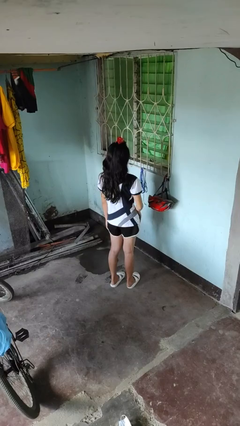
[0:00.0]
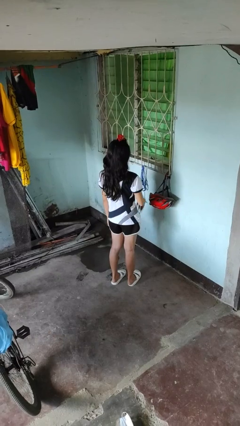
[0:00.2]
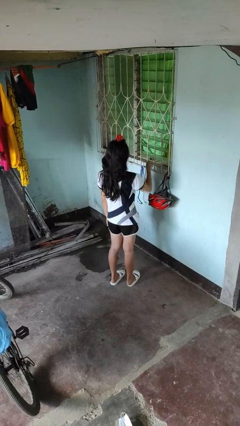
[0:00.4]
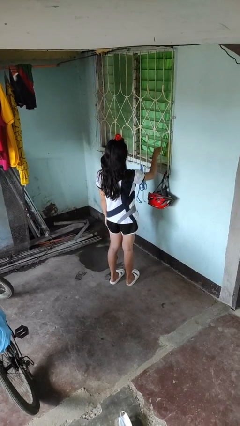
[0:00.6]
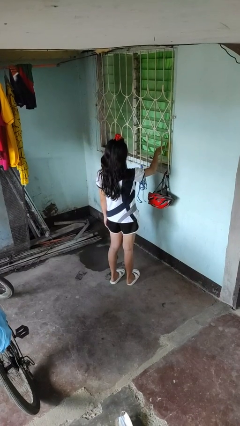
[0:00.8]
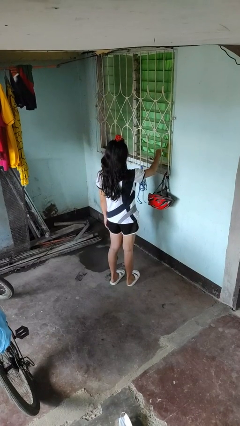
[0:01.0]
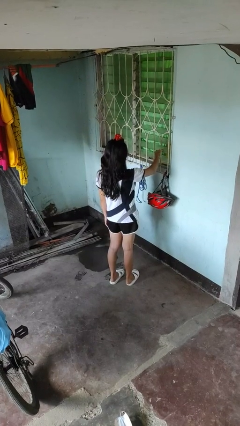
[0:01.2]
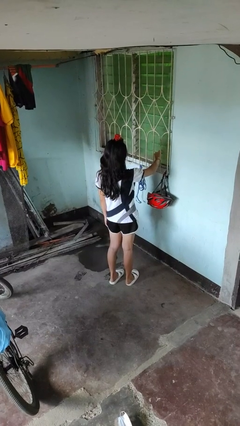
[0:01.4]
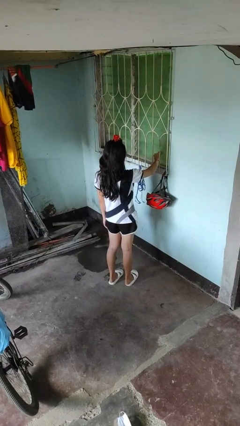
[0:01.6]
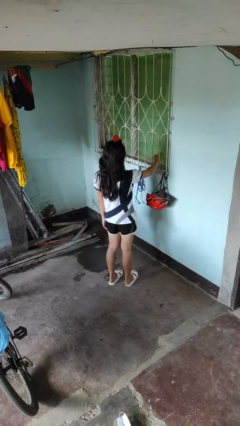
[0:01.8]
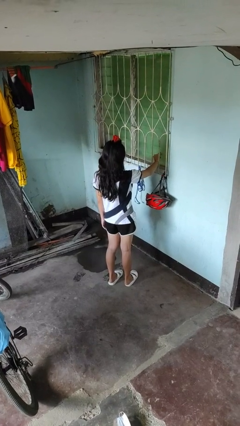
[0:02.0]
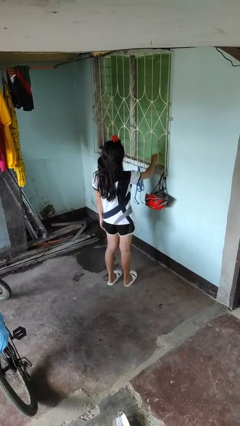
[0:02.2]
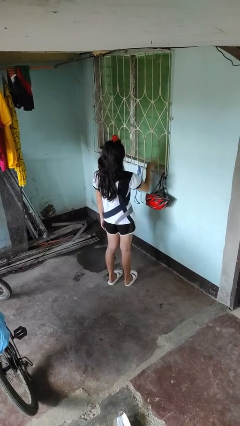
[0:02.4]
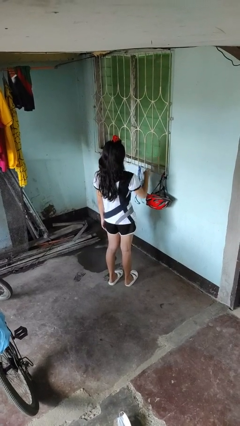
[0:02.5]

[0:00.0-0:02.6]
person closes home window

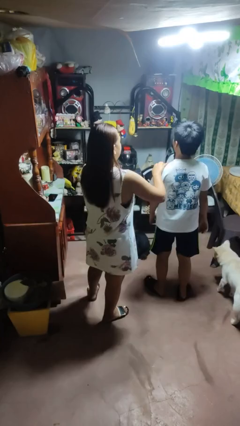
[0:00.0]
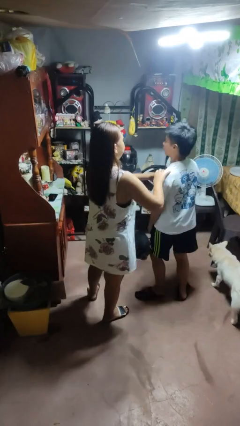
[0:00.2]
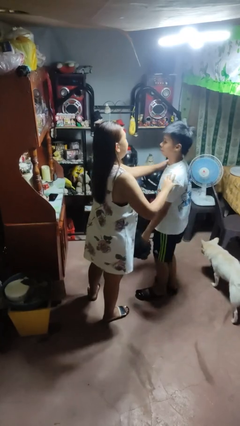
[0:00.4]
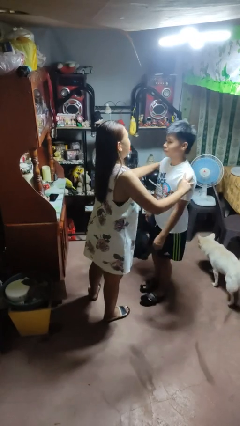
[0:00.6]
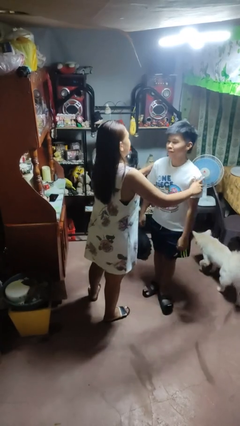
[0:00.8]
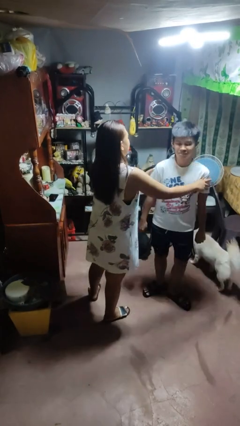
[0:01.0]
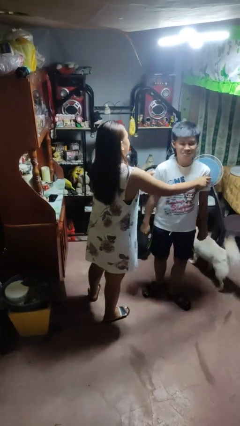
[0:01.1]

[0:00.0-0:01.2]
person spins person around

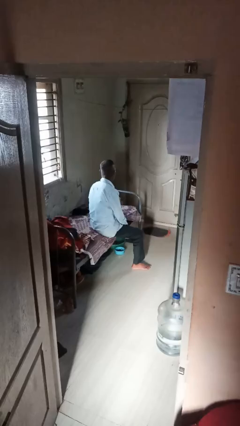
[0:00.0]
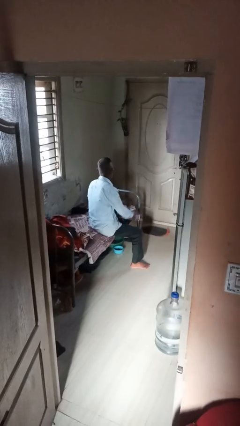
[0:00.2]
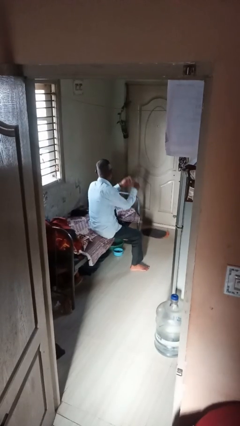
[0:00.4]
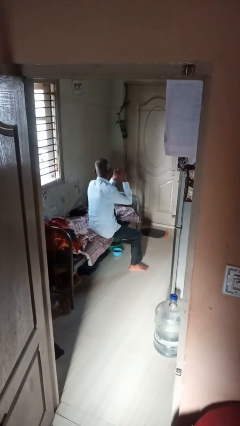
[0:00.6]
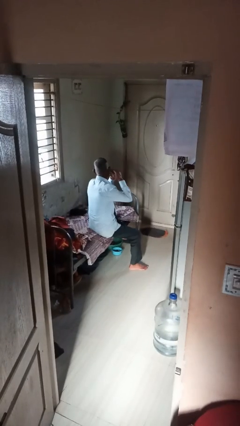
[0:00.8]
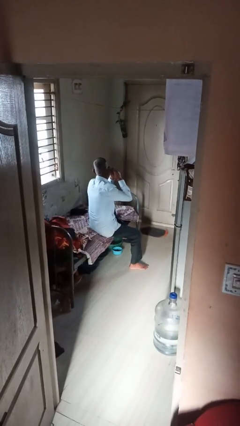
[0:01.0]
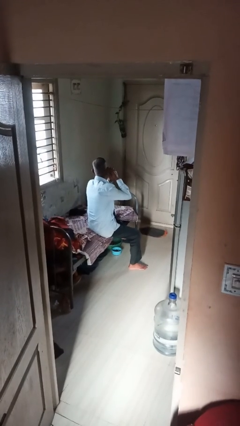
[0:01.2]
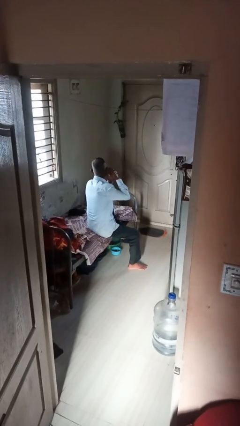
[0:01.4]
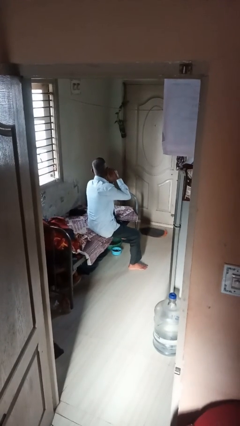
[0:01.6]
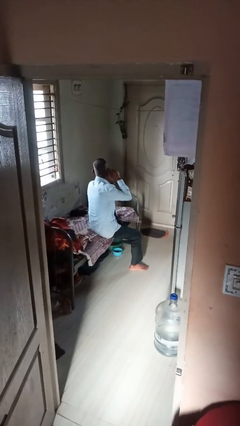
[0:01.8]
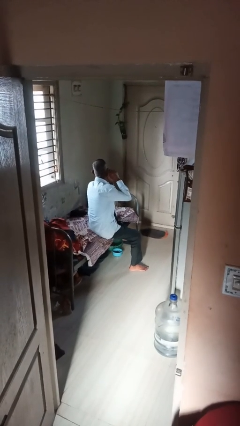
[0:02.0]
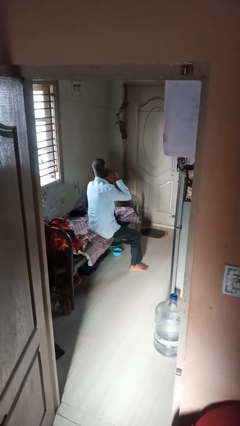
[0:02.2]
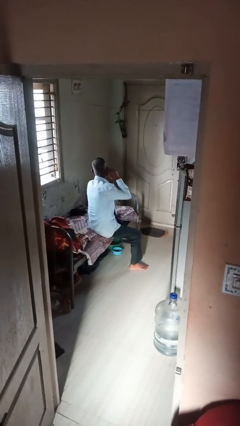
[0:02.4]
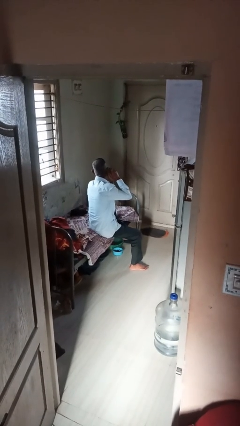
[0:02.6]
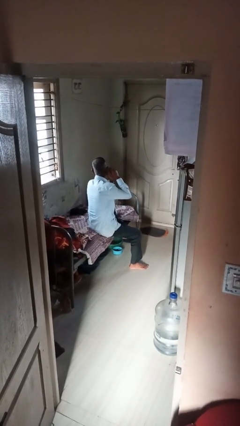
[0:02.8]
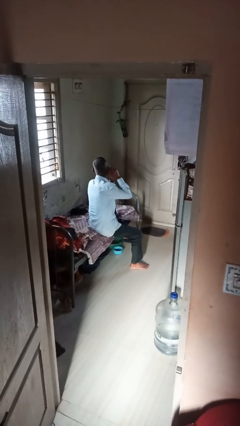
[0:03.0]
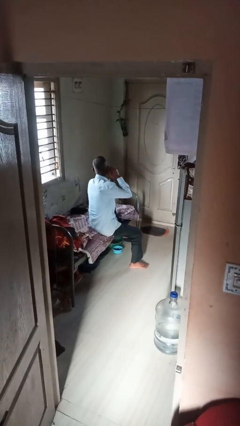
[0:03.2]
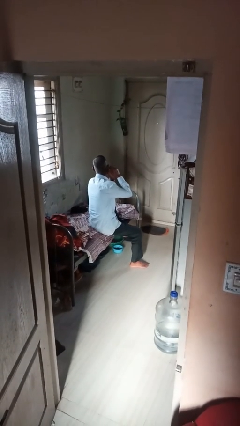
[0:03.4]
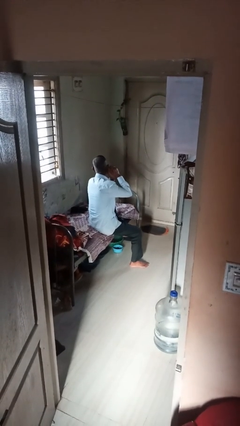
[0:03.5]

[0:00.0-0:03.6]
person puts on earrings

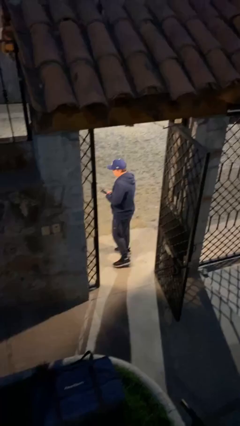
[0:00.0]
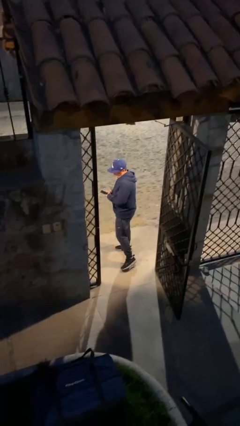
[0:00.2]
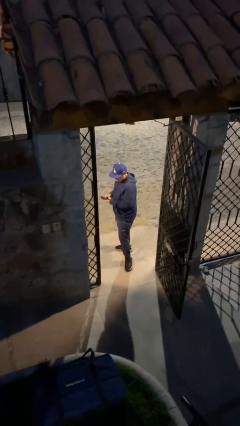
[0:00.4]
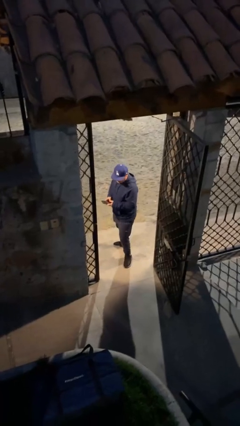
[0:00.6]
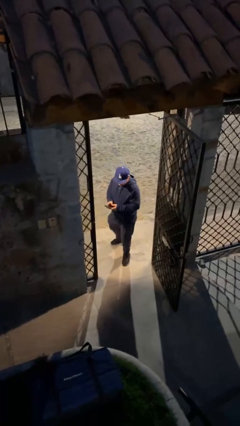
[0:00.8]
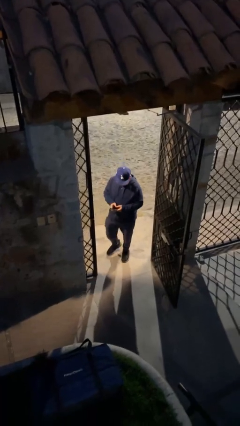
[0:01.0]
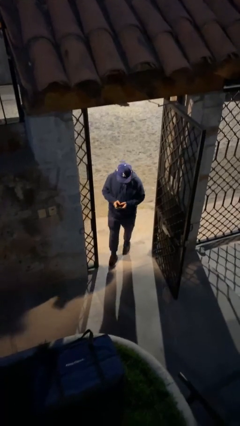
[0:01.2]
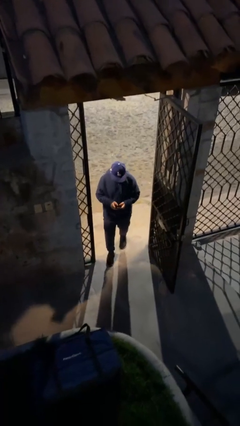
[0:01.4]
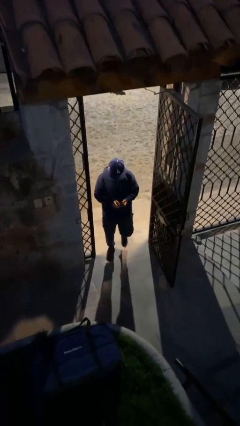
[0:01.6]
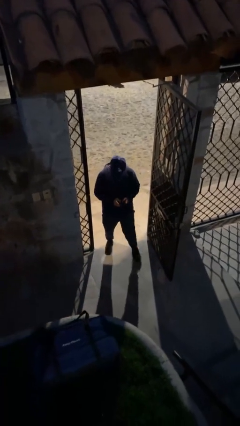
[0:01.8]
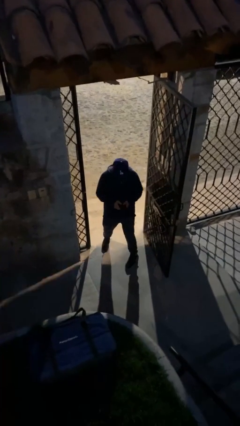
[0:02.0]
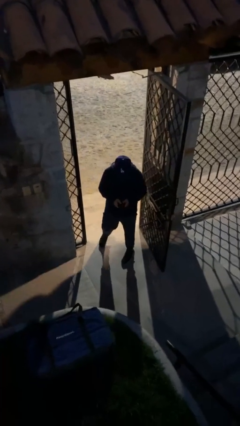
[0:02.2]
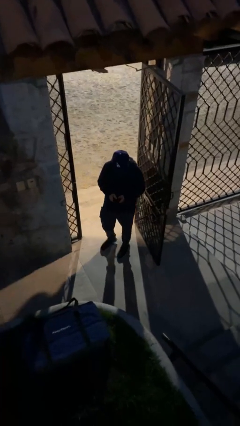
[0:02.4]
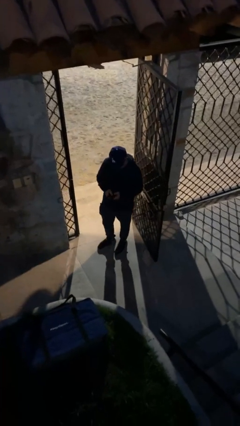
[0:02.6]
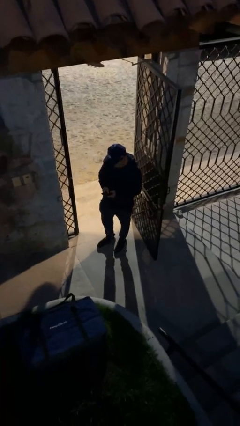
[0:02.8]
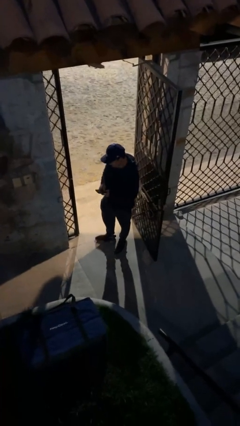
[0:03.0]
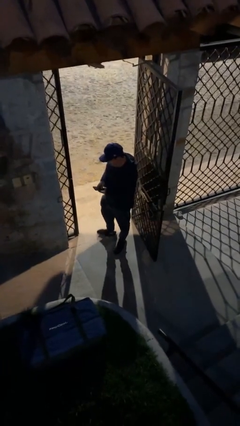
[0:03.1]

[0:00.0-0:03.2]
person enters scene through structure

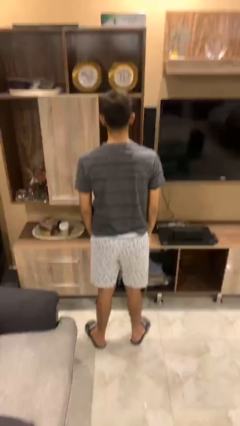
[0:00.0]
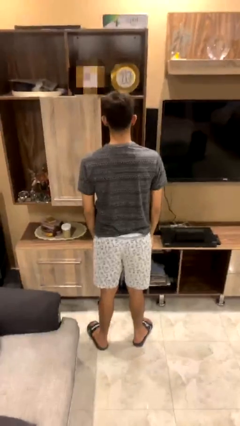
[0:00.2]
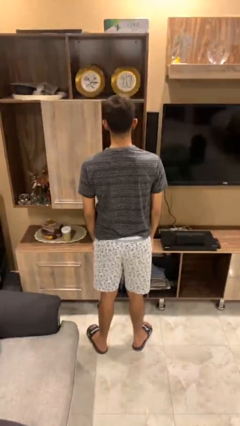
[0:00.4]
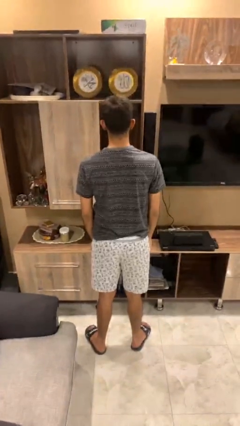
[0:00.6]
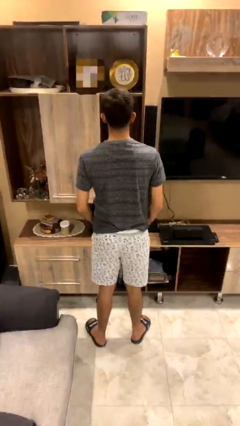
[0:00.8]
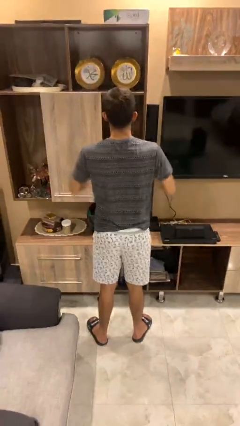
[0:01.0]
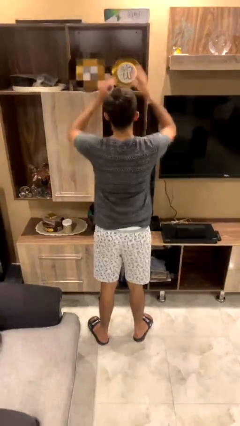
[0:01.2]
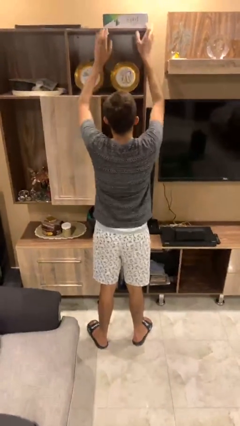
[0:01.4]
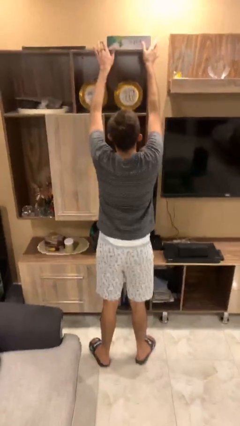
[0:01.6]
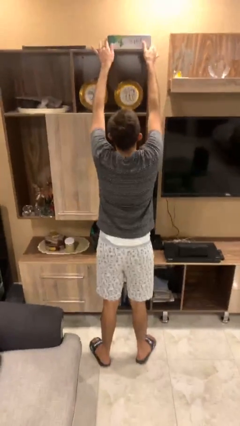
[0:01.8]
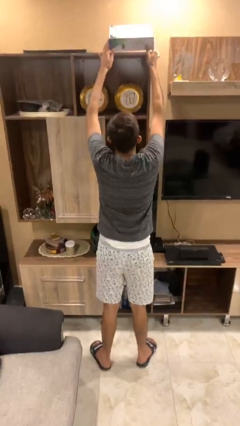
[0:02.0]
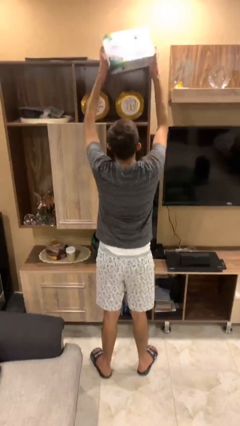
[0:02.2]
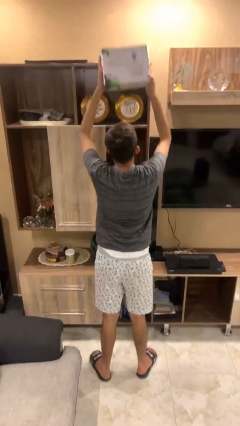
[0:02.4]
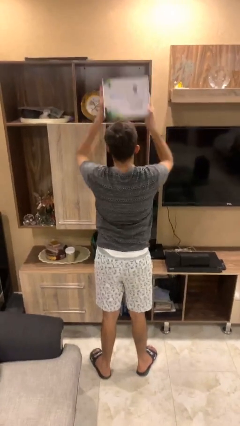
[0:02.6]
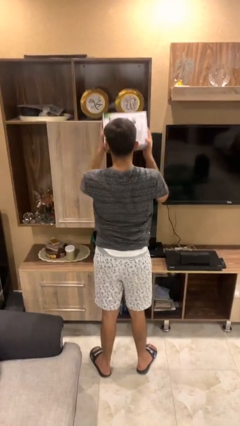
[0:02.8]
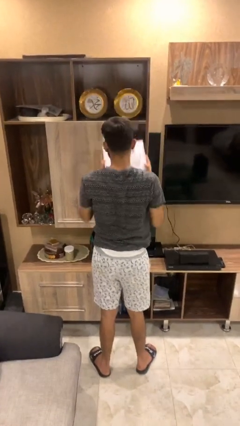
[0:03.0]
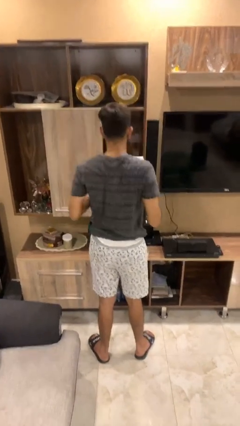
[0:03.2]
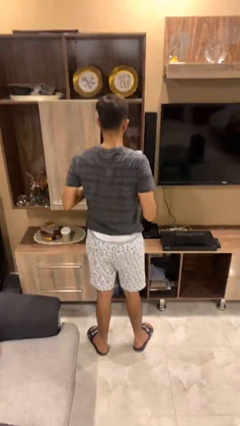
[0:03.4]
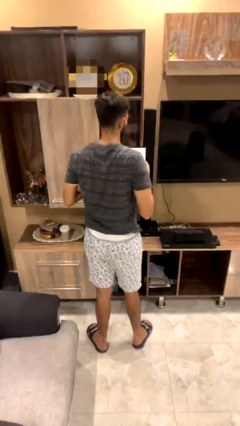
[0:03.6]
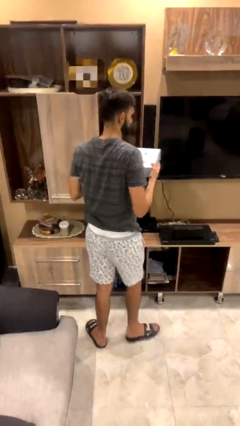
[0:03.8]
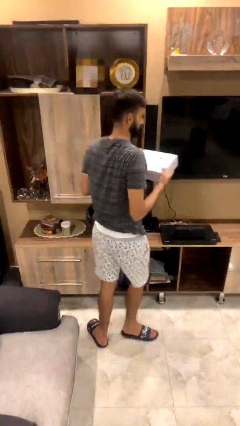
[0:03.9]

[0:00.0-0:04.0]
person picks up object from shelf

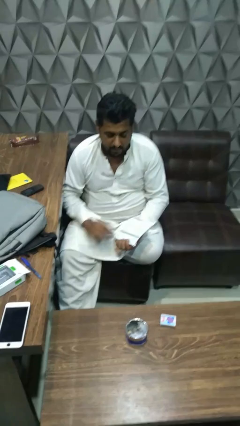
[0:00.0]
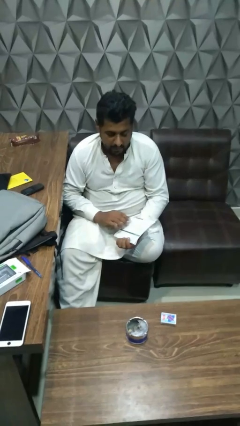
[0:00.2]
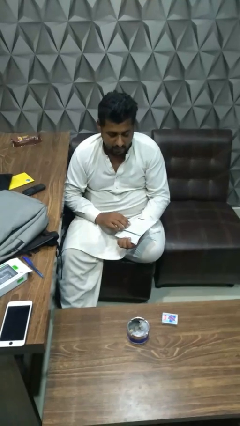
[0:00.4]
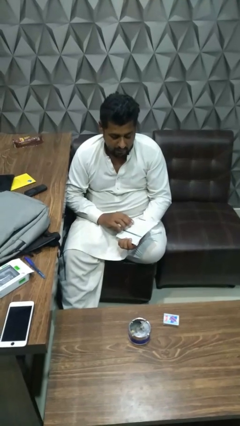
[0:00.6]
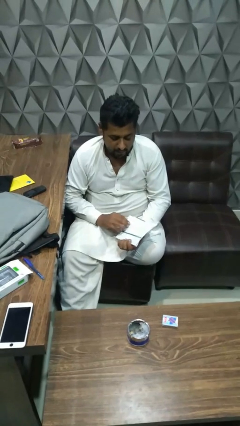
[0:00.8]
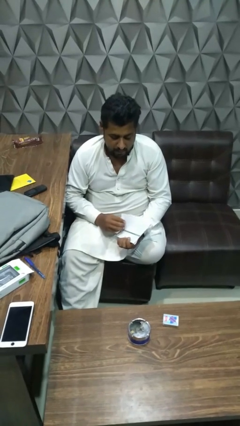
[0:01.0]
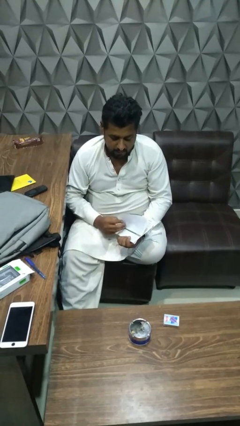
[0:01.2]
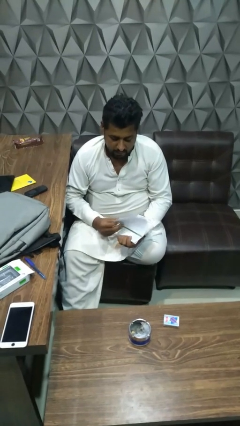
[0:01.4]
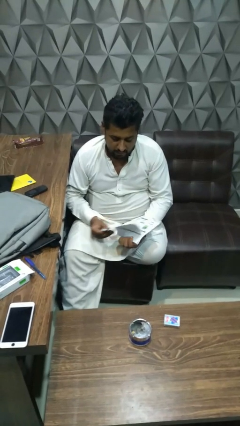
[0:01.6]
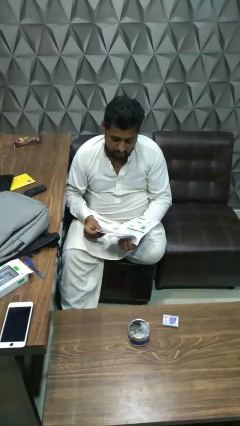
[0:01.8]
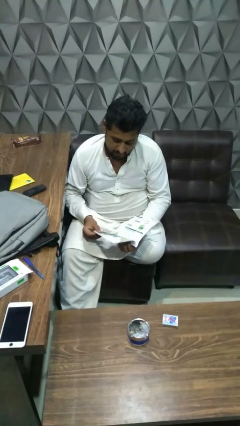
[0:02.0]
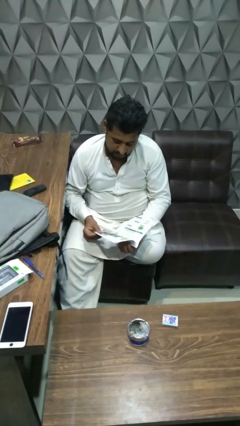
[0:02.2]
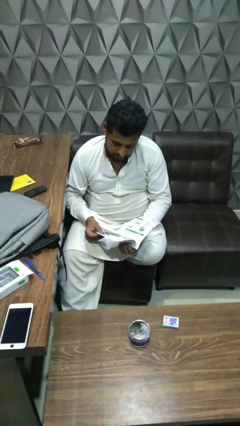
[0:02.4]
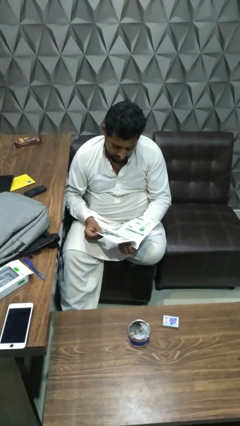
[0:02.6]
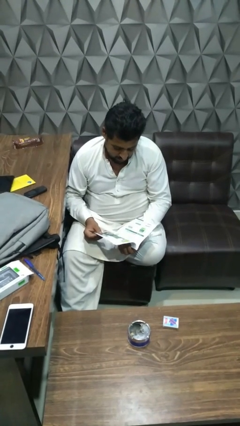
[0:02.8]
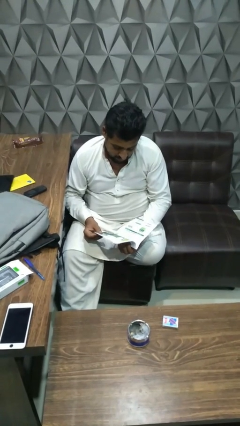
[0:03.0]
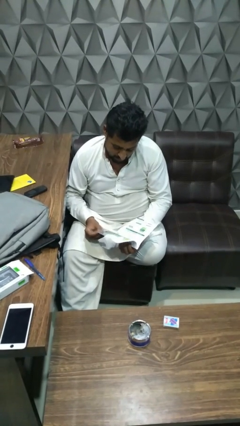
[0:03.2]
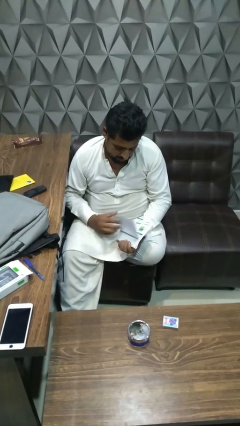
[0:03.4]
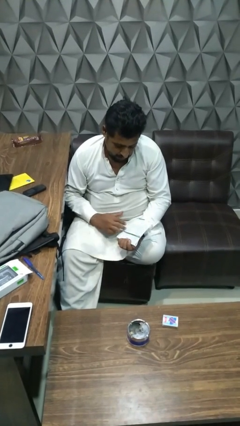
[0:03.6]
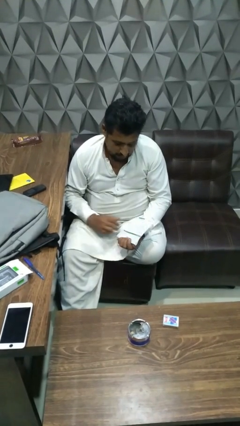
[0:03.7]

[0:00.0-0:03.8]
person reads book
